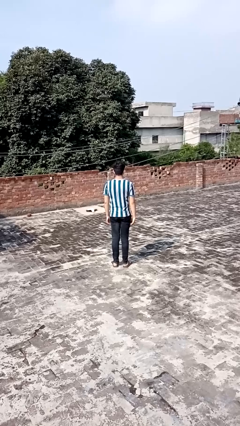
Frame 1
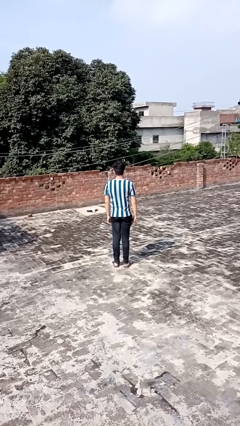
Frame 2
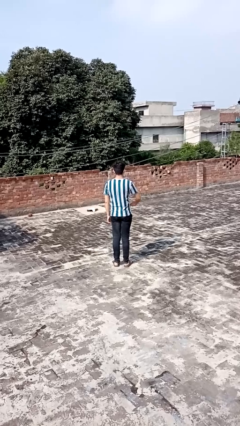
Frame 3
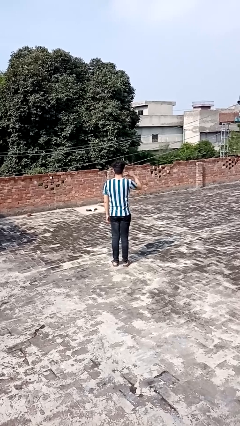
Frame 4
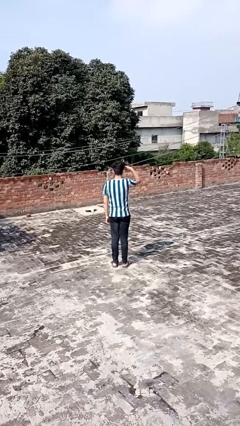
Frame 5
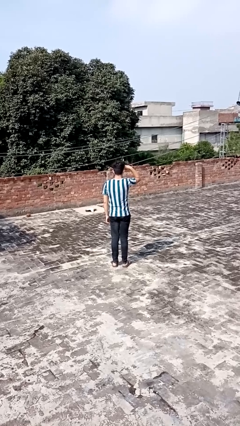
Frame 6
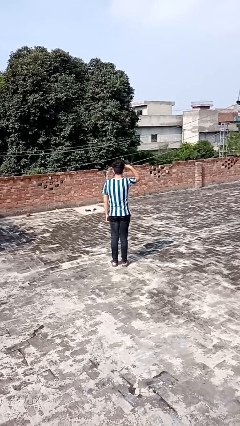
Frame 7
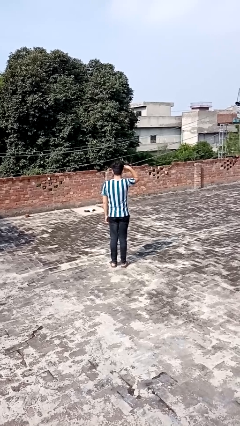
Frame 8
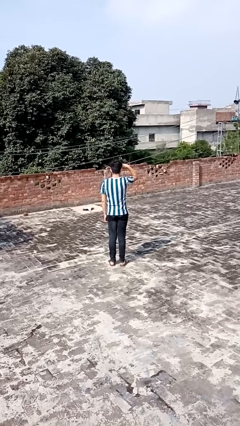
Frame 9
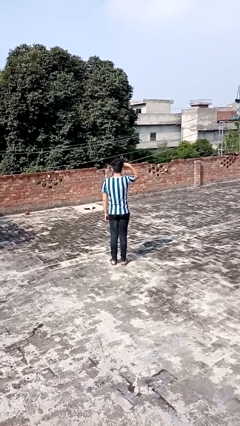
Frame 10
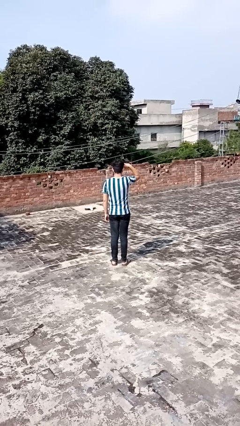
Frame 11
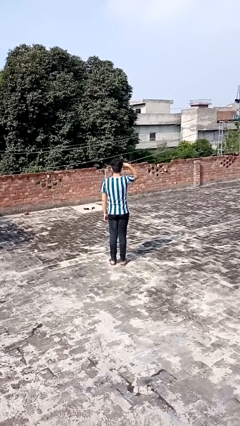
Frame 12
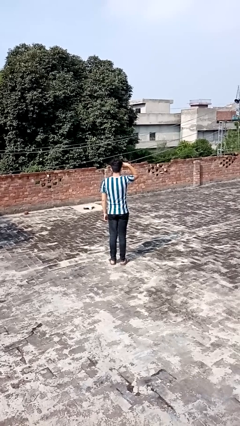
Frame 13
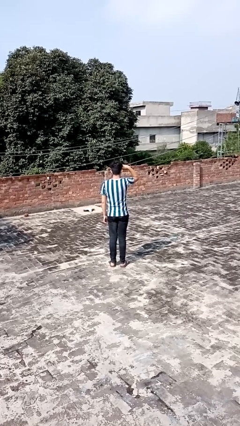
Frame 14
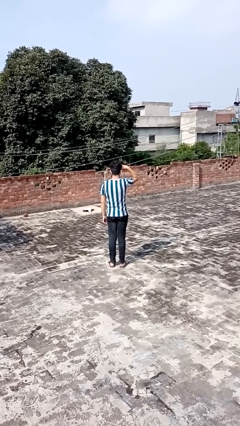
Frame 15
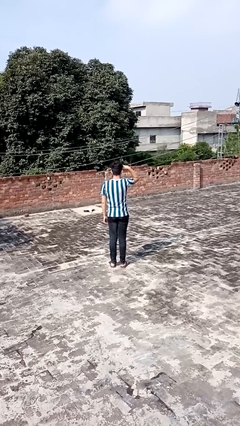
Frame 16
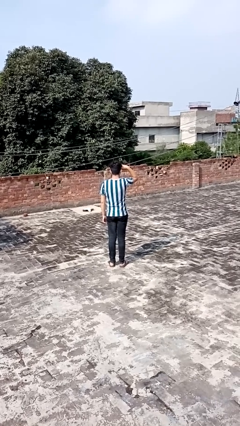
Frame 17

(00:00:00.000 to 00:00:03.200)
person salutes

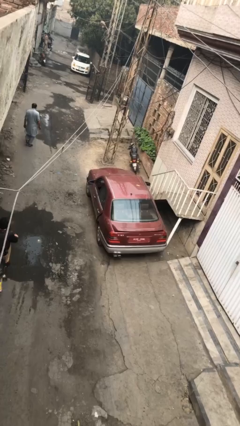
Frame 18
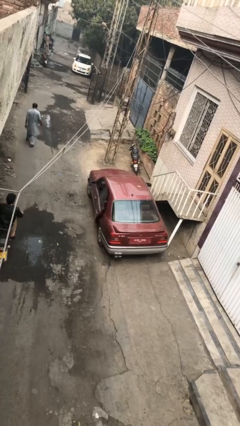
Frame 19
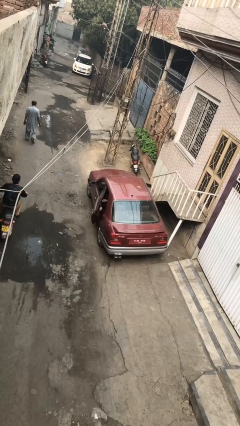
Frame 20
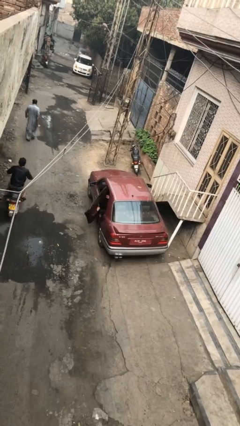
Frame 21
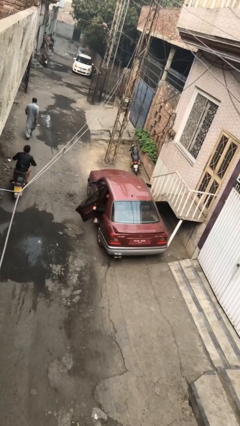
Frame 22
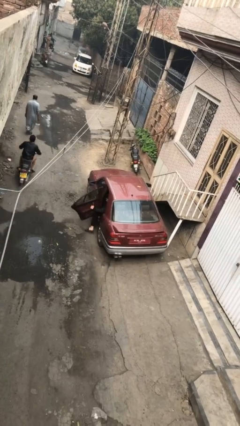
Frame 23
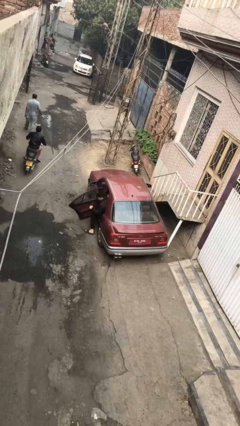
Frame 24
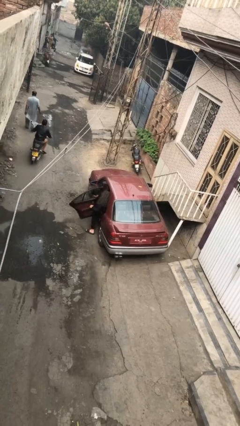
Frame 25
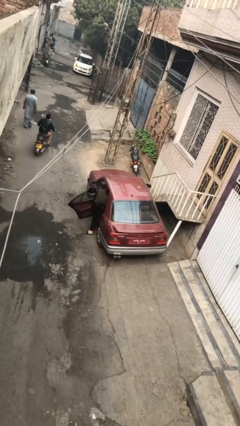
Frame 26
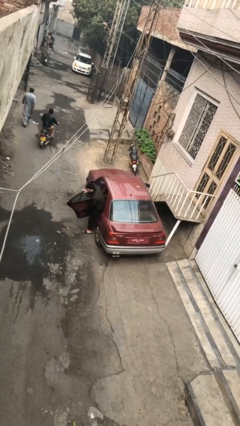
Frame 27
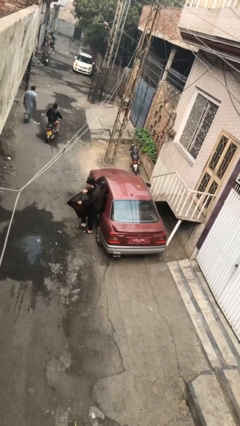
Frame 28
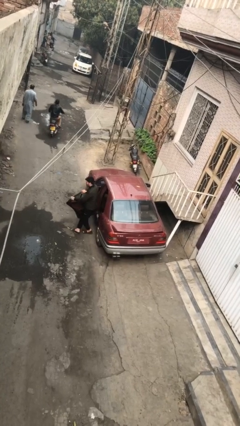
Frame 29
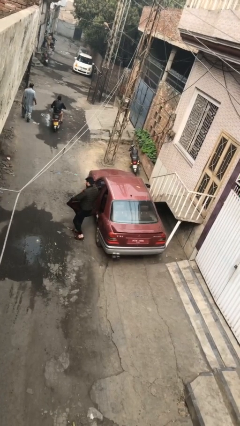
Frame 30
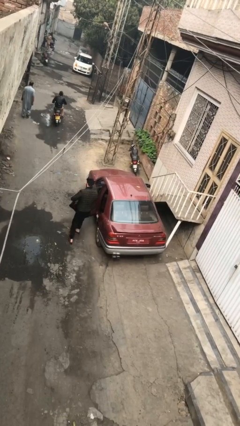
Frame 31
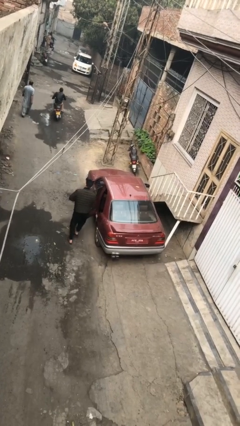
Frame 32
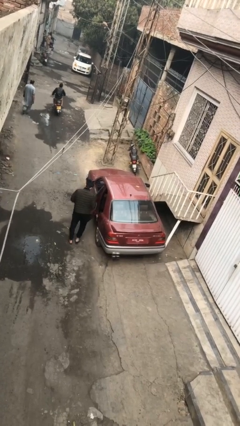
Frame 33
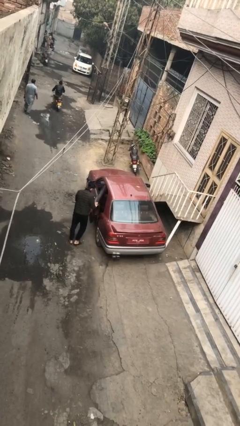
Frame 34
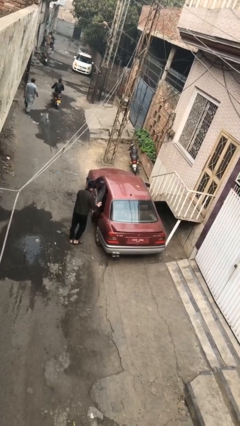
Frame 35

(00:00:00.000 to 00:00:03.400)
car drops off person

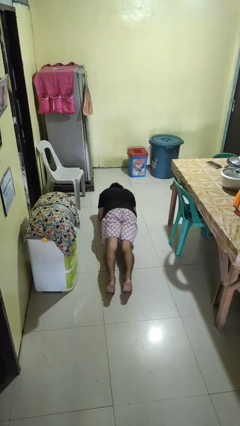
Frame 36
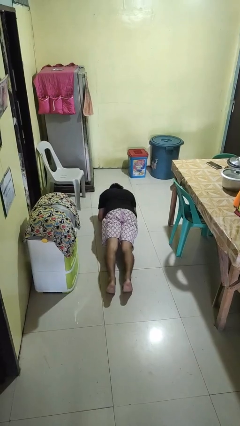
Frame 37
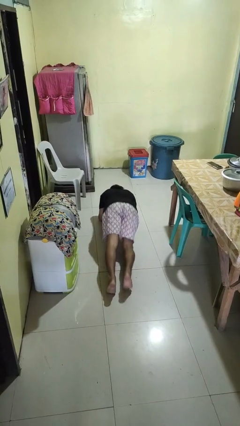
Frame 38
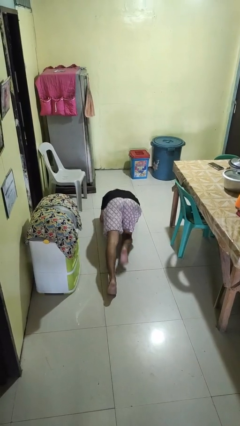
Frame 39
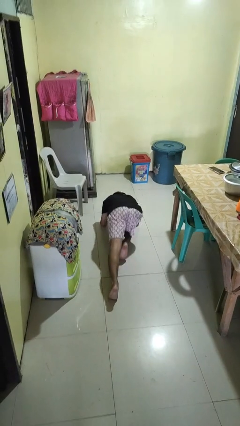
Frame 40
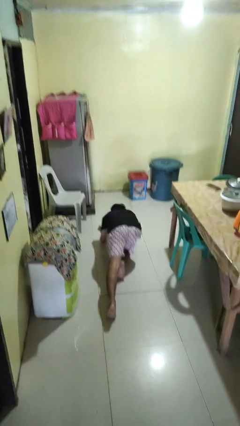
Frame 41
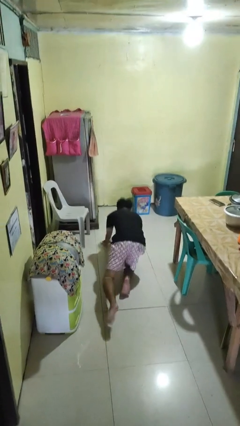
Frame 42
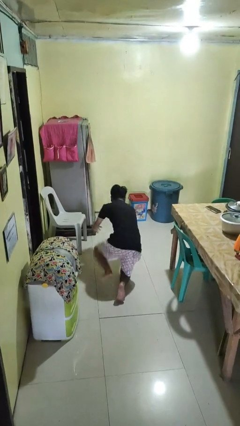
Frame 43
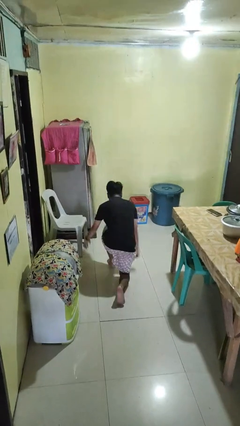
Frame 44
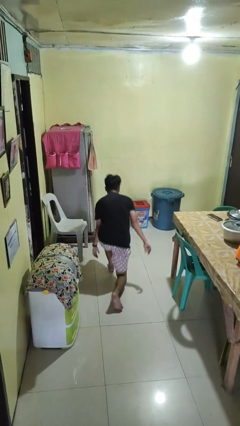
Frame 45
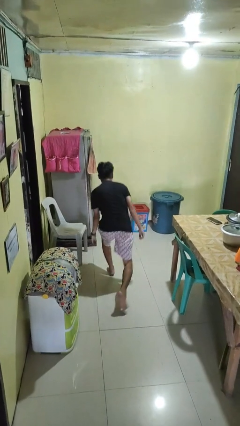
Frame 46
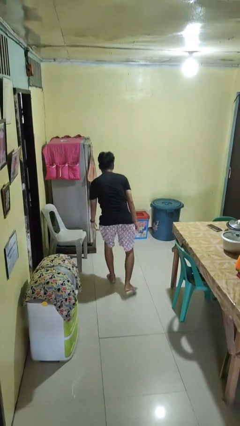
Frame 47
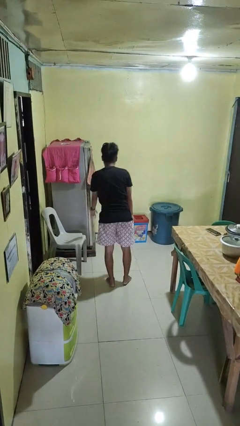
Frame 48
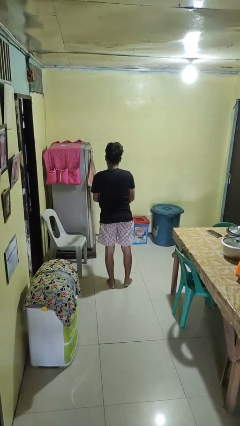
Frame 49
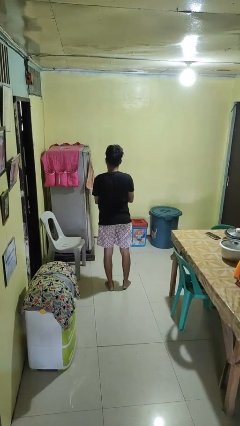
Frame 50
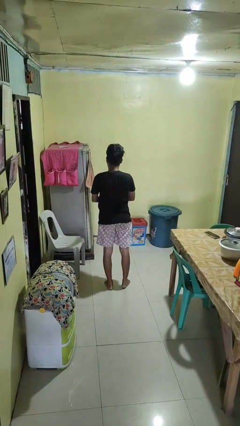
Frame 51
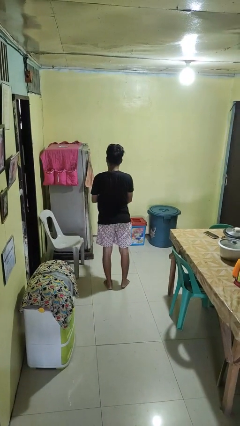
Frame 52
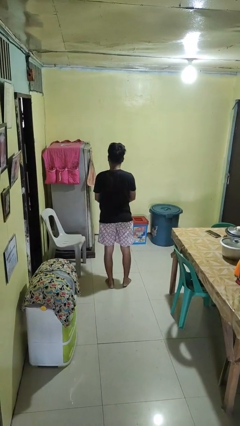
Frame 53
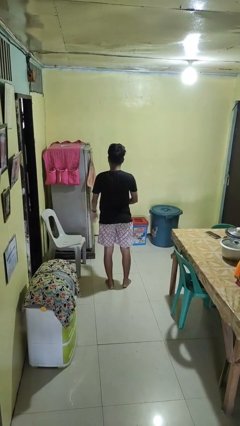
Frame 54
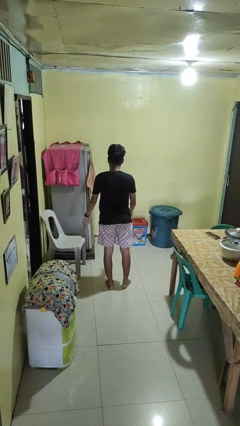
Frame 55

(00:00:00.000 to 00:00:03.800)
person stands up from floor

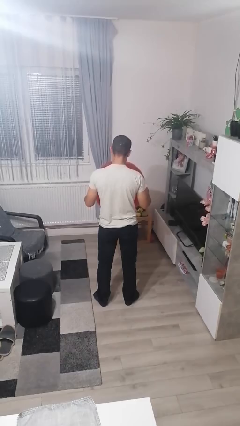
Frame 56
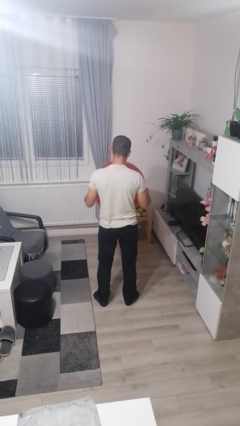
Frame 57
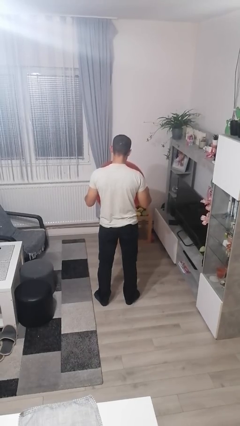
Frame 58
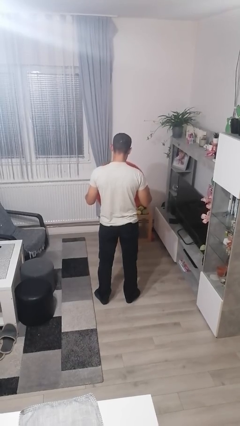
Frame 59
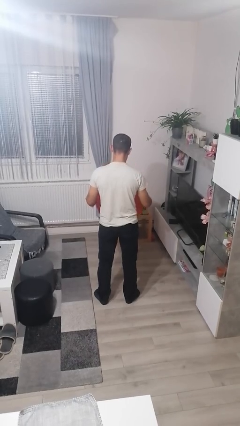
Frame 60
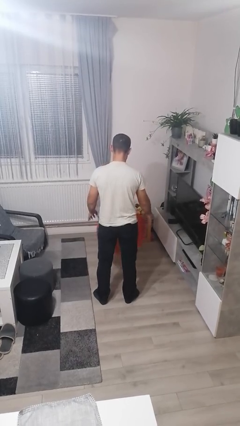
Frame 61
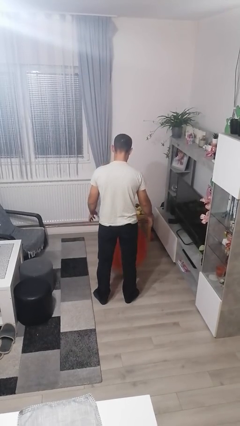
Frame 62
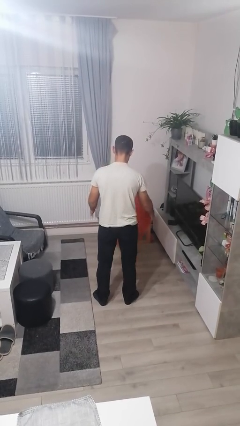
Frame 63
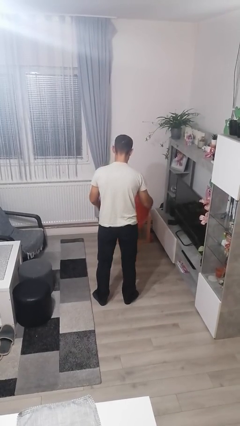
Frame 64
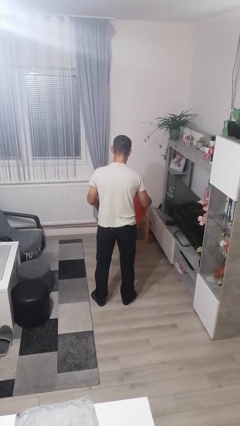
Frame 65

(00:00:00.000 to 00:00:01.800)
person bounces ball on floor

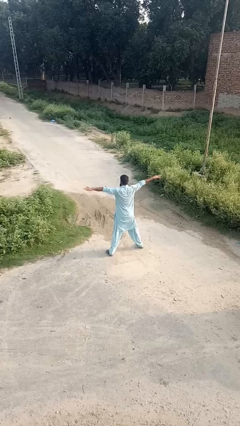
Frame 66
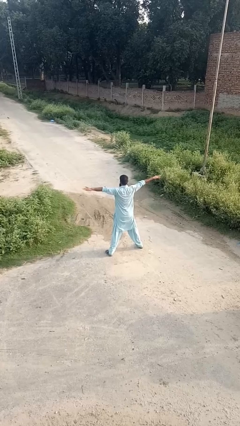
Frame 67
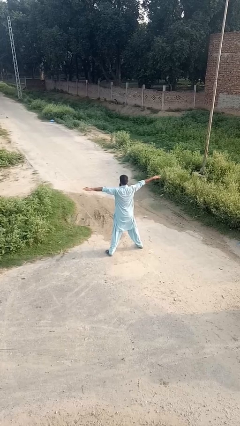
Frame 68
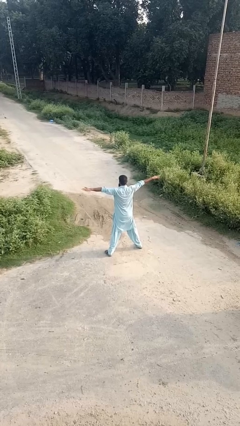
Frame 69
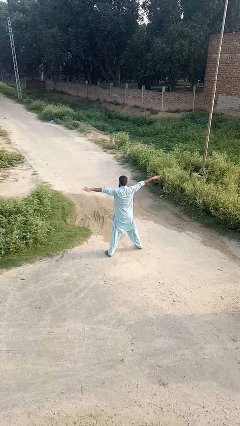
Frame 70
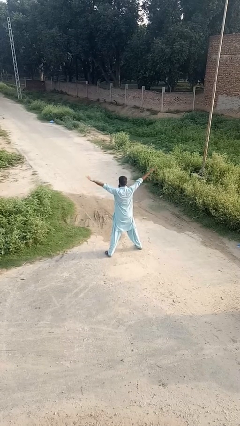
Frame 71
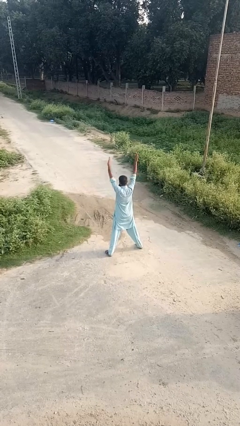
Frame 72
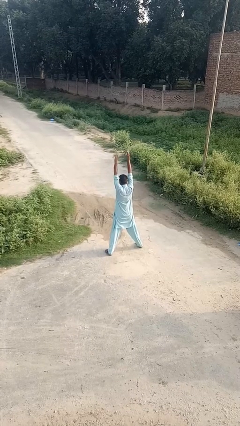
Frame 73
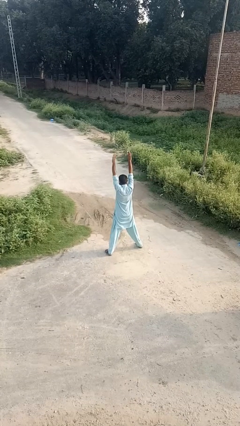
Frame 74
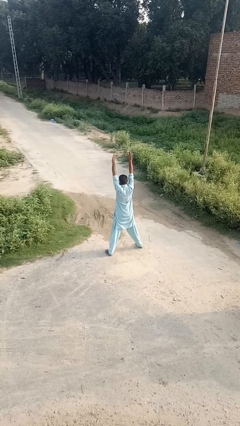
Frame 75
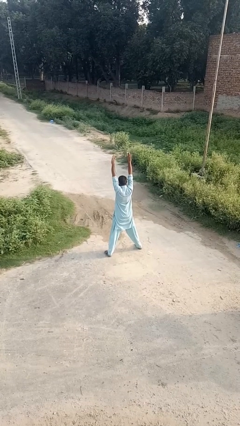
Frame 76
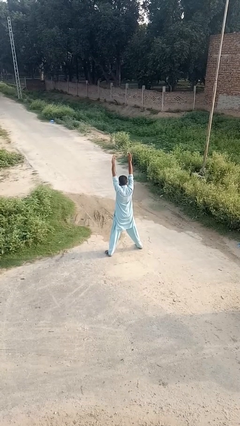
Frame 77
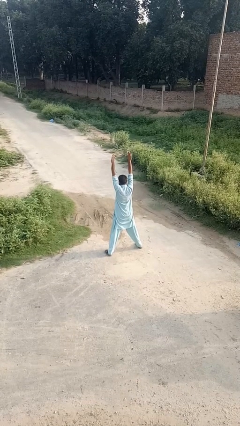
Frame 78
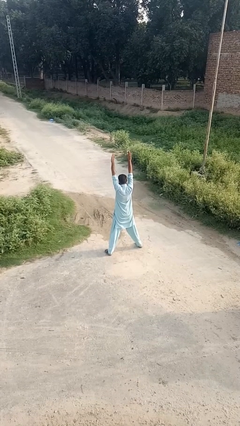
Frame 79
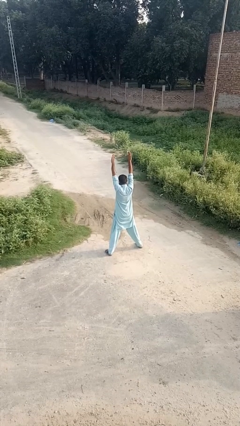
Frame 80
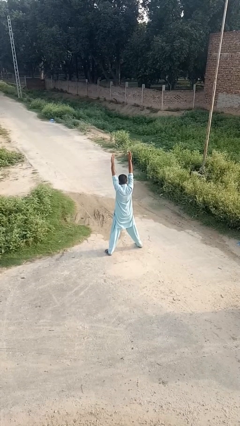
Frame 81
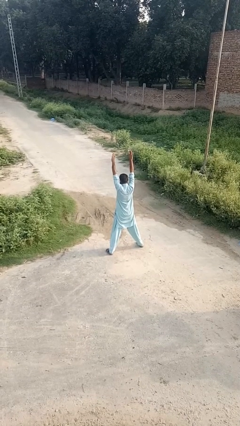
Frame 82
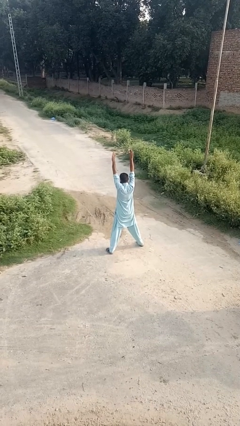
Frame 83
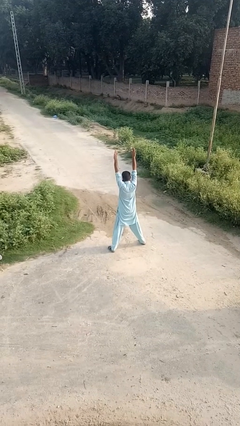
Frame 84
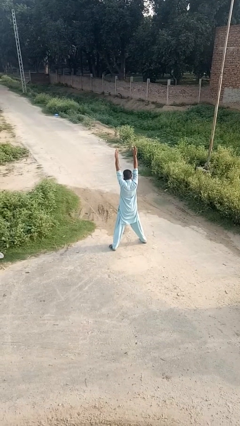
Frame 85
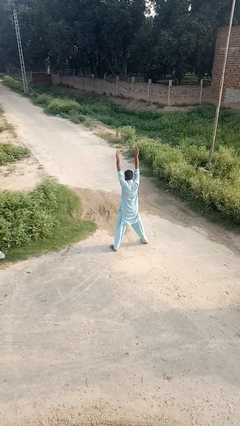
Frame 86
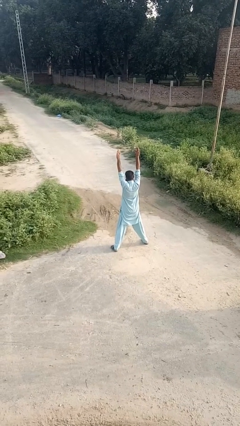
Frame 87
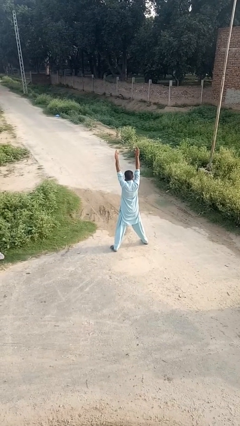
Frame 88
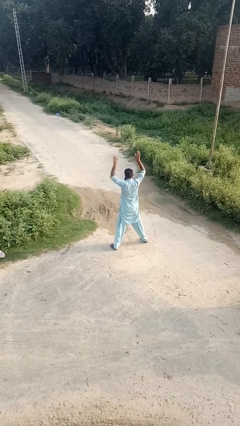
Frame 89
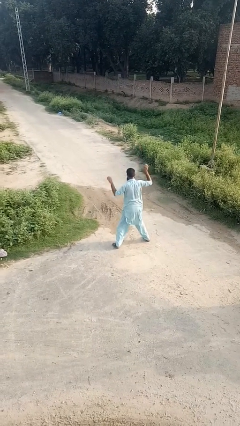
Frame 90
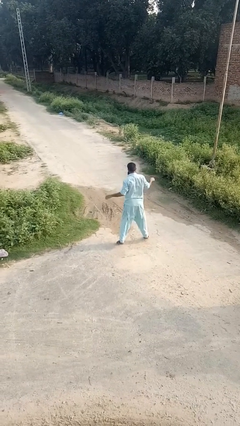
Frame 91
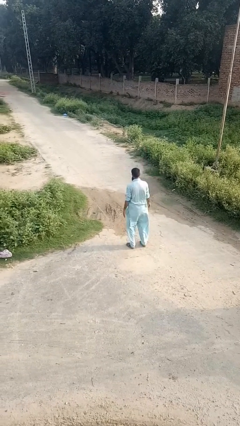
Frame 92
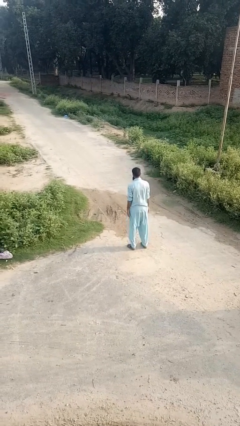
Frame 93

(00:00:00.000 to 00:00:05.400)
person stretches arms over head
